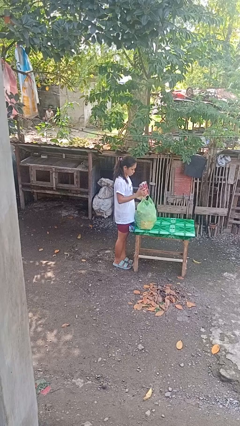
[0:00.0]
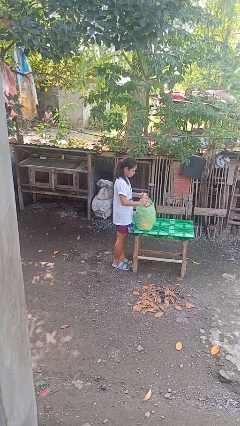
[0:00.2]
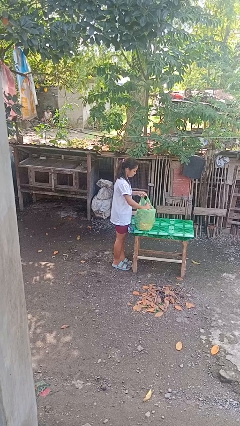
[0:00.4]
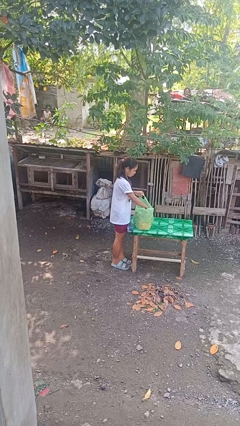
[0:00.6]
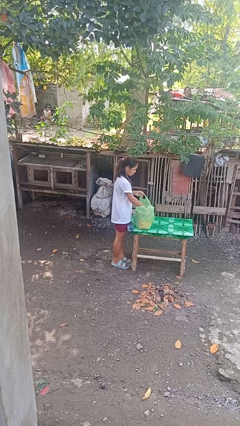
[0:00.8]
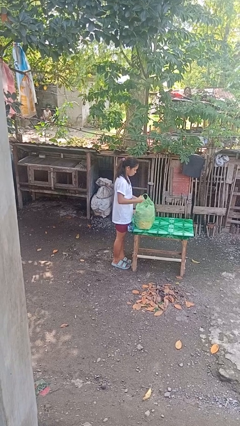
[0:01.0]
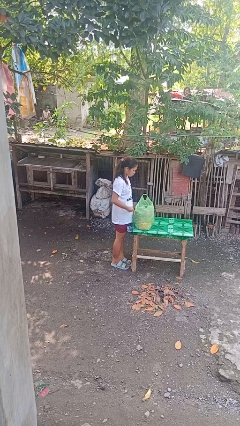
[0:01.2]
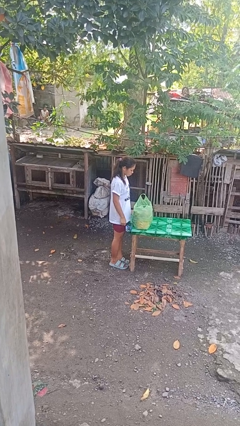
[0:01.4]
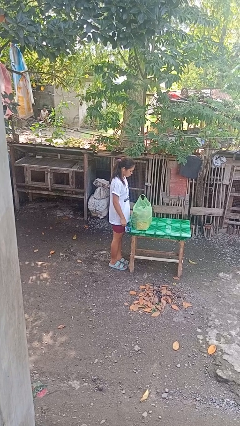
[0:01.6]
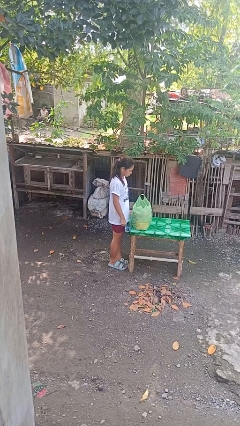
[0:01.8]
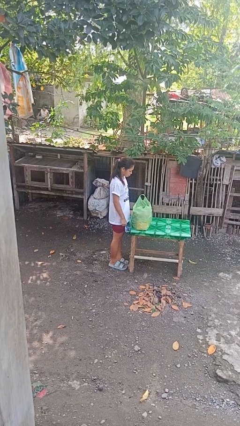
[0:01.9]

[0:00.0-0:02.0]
person puts object into bag

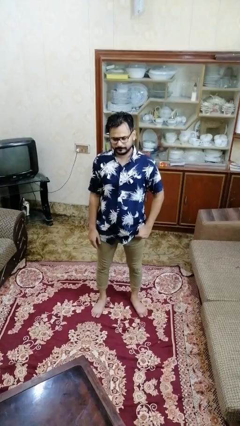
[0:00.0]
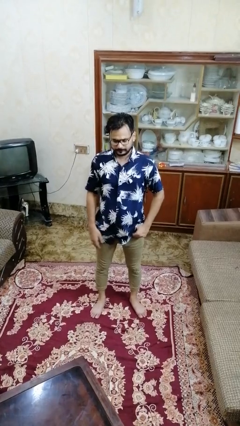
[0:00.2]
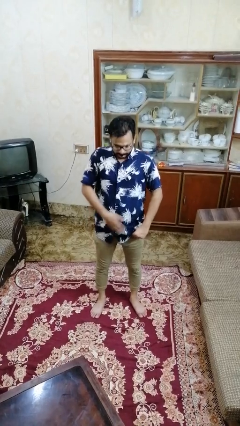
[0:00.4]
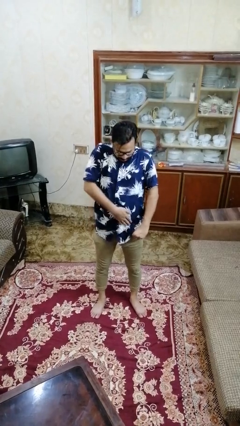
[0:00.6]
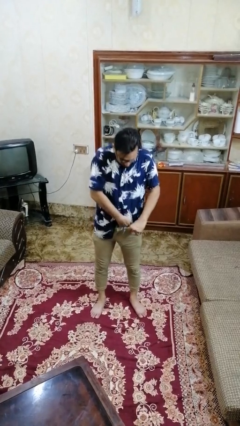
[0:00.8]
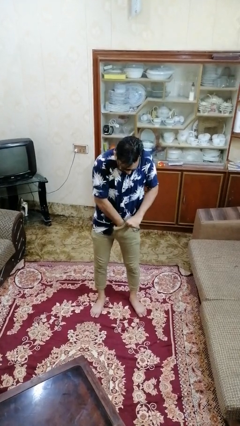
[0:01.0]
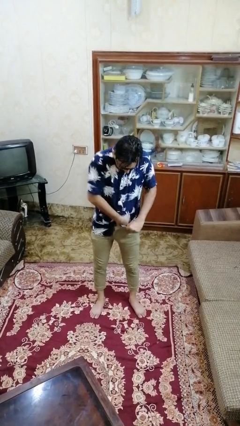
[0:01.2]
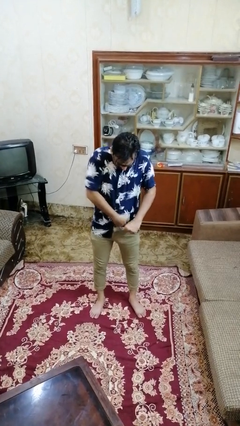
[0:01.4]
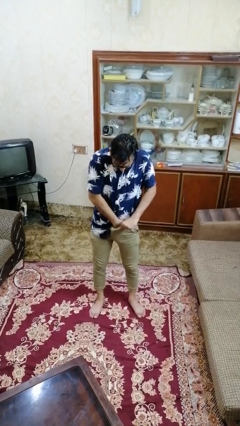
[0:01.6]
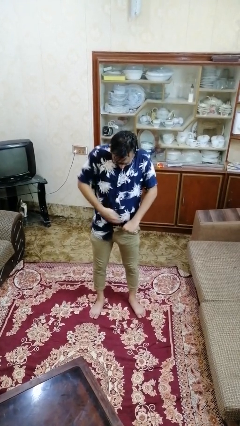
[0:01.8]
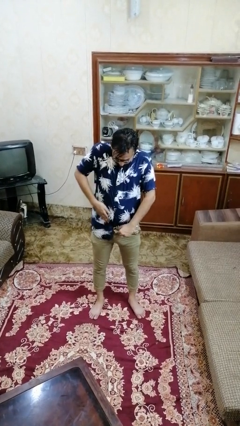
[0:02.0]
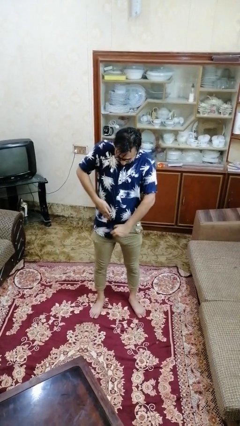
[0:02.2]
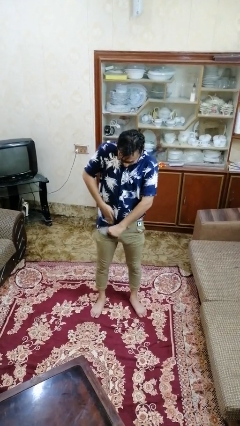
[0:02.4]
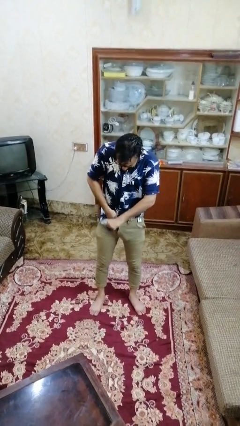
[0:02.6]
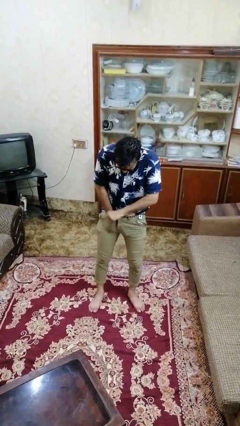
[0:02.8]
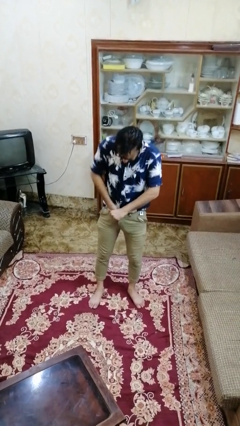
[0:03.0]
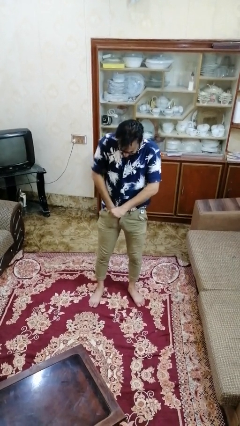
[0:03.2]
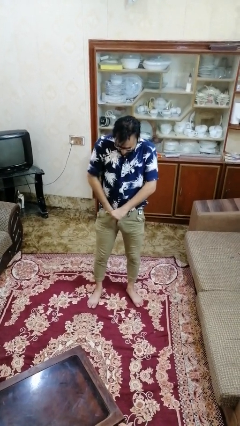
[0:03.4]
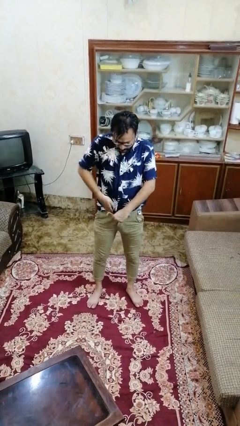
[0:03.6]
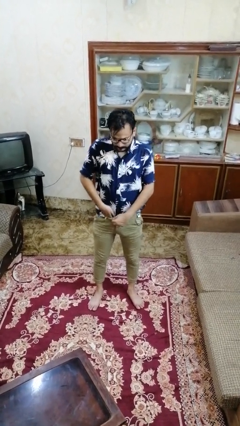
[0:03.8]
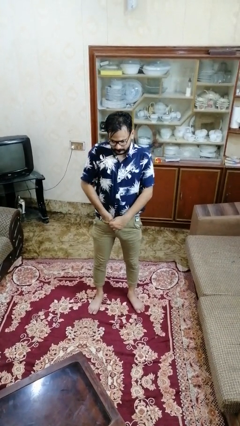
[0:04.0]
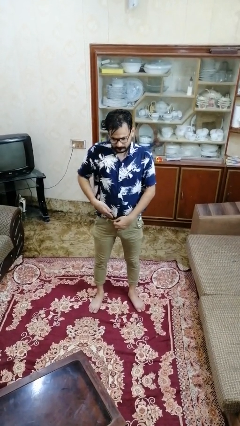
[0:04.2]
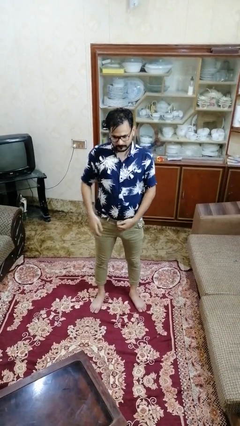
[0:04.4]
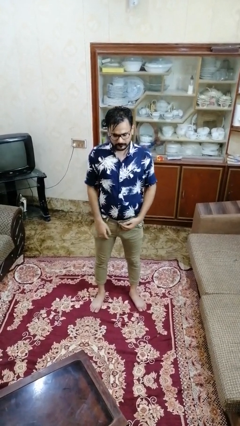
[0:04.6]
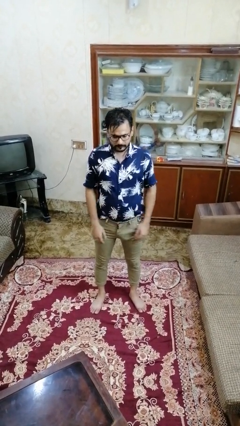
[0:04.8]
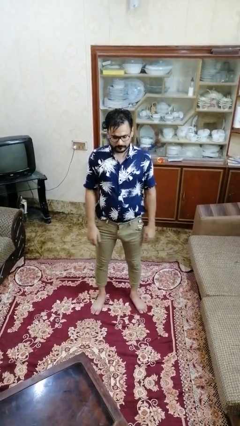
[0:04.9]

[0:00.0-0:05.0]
person tucks in shirt

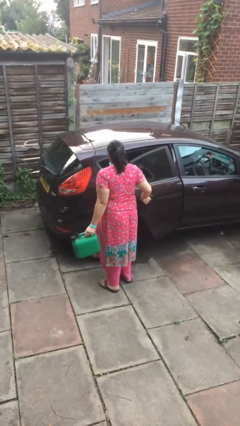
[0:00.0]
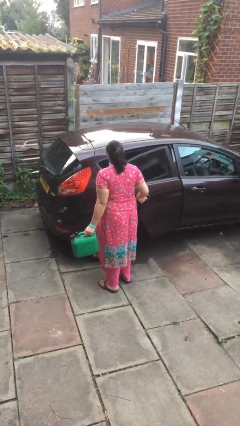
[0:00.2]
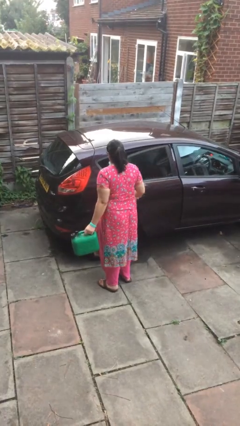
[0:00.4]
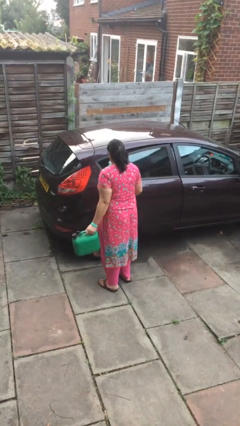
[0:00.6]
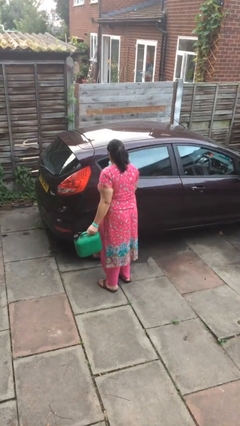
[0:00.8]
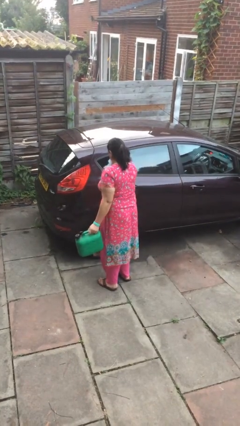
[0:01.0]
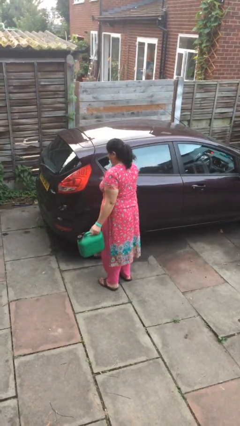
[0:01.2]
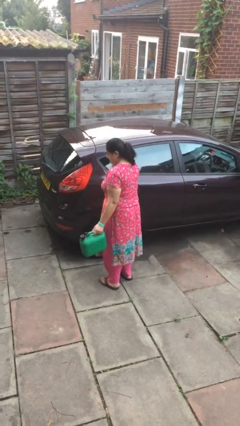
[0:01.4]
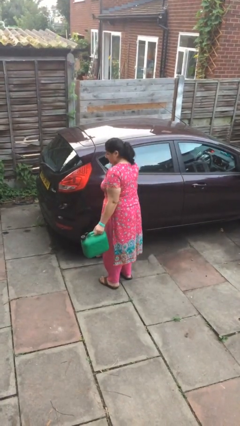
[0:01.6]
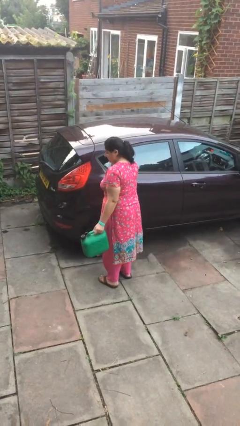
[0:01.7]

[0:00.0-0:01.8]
person closes car door

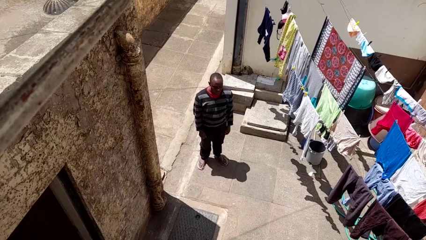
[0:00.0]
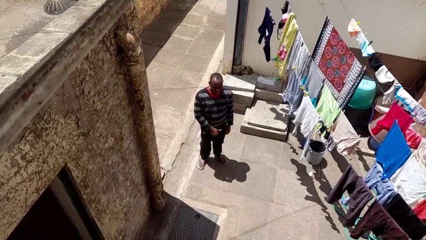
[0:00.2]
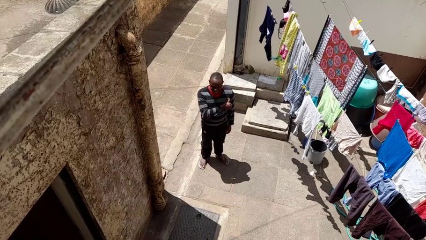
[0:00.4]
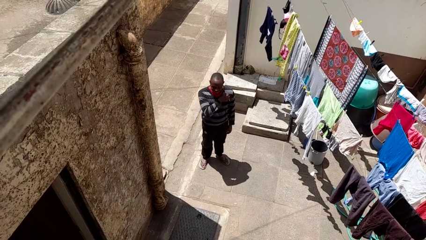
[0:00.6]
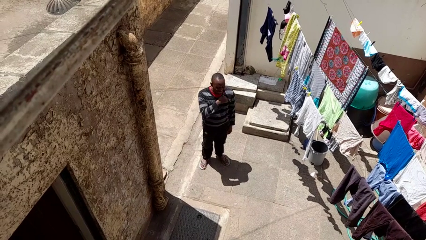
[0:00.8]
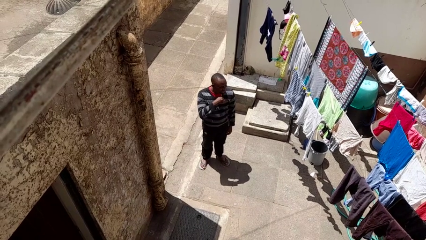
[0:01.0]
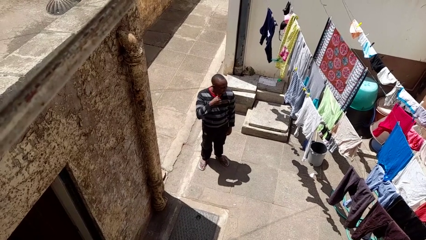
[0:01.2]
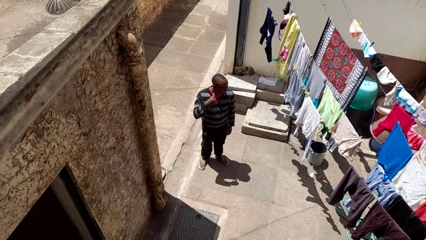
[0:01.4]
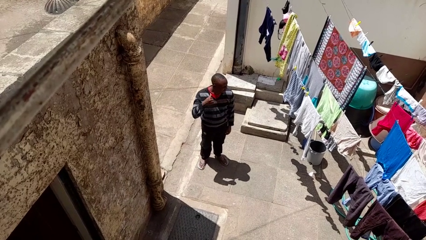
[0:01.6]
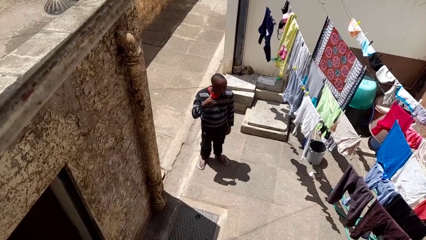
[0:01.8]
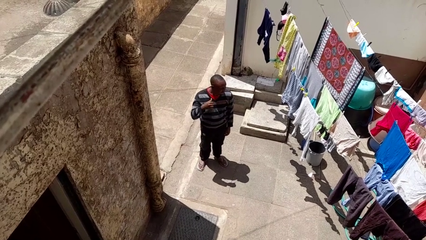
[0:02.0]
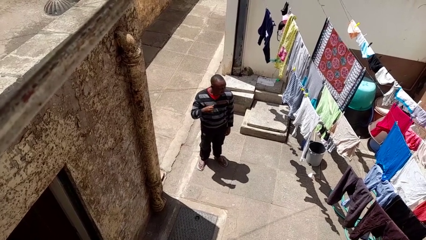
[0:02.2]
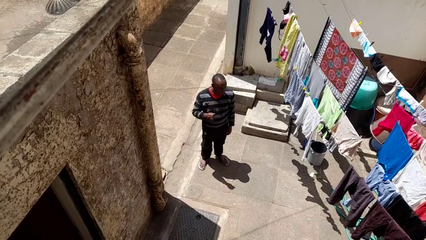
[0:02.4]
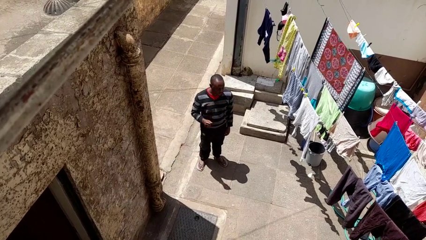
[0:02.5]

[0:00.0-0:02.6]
person gestures cut

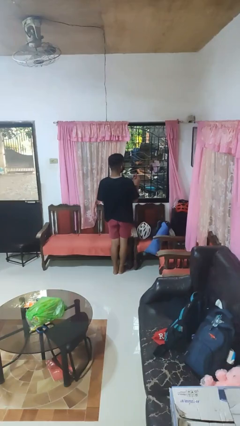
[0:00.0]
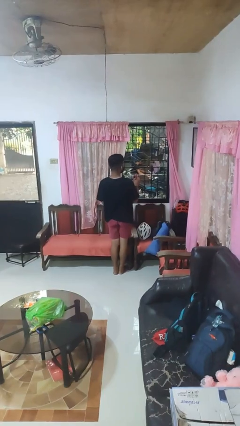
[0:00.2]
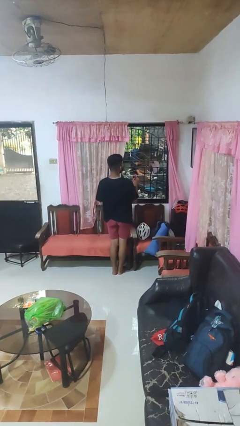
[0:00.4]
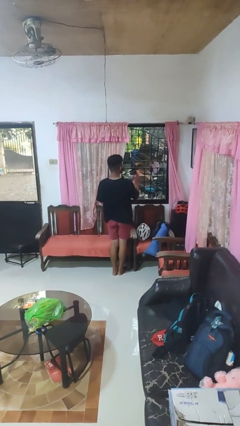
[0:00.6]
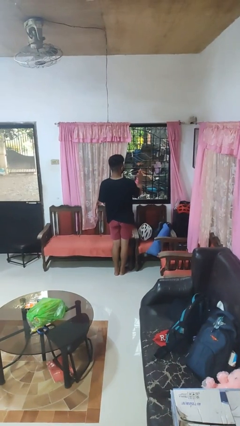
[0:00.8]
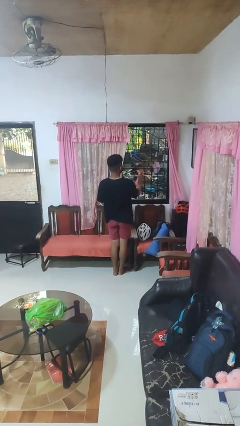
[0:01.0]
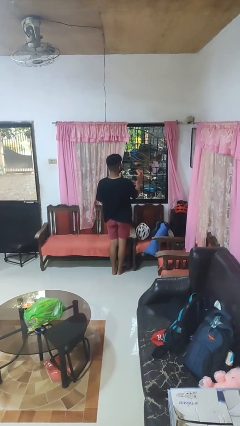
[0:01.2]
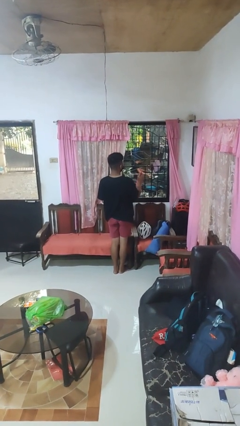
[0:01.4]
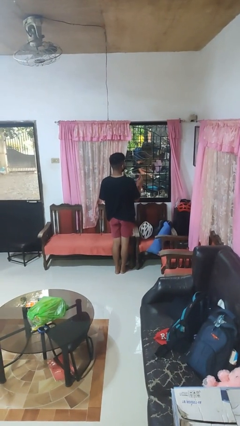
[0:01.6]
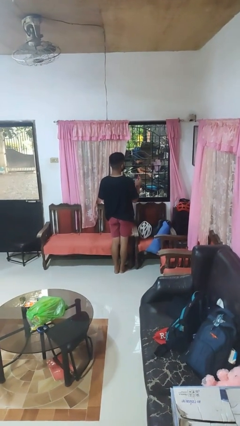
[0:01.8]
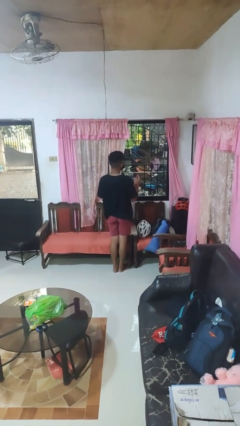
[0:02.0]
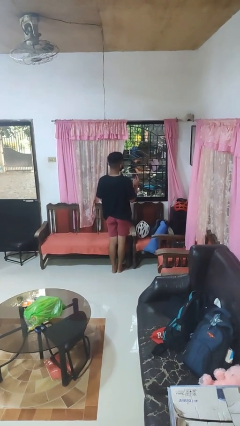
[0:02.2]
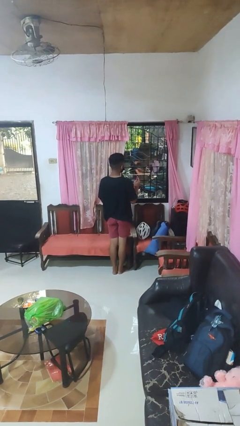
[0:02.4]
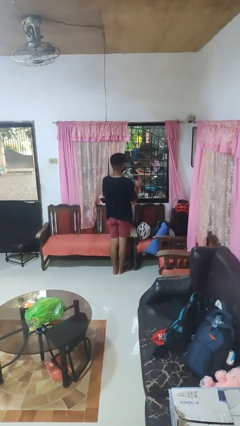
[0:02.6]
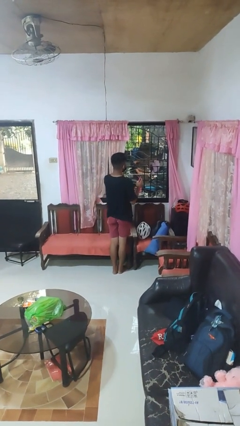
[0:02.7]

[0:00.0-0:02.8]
person sprays from bottle

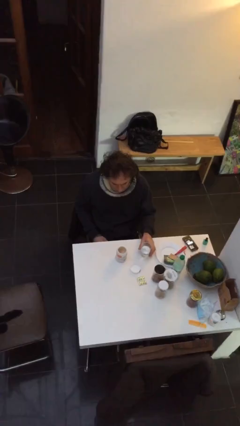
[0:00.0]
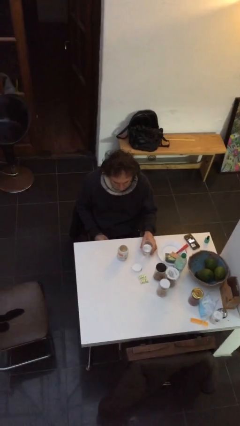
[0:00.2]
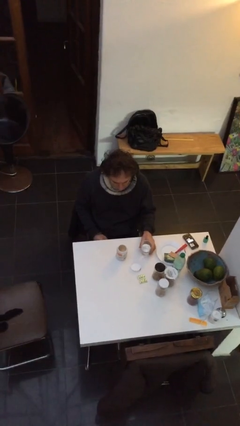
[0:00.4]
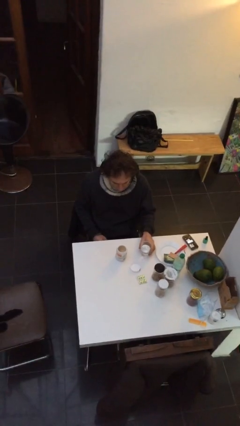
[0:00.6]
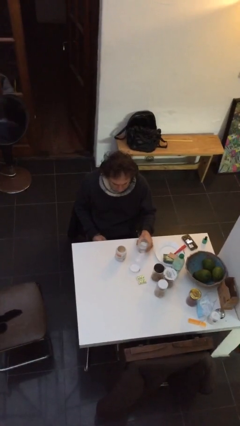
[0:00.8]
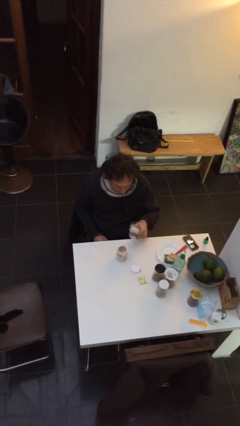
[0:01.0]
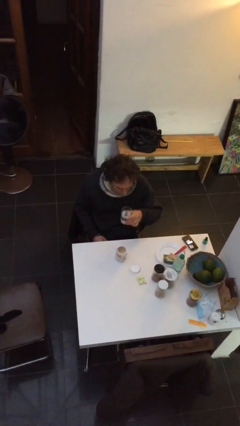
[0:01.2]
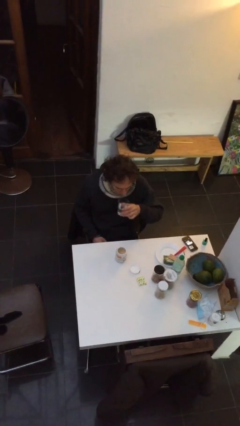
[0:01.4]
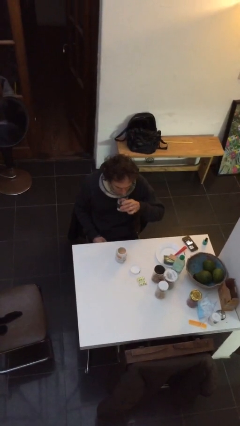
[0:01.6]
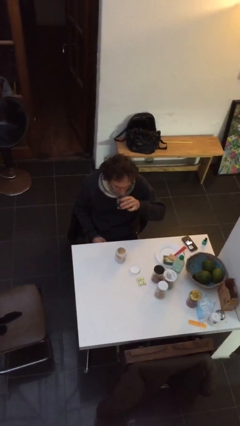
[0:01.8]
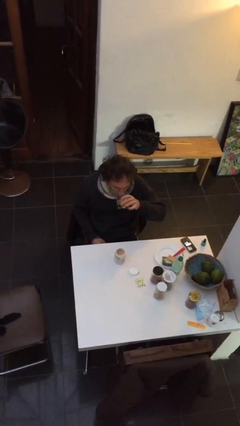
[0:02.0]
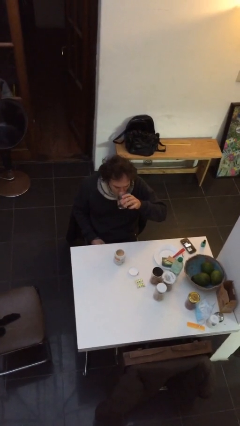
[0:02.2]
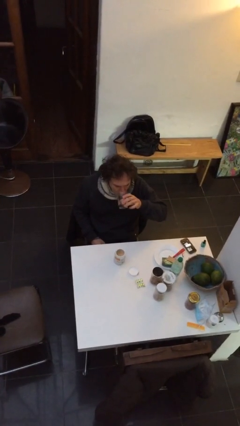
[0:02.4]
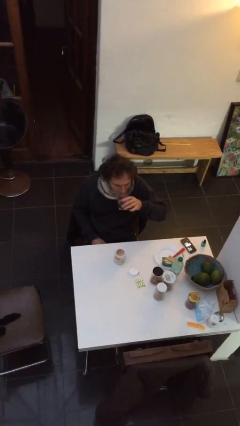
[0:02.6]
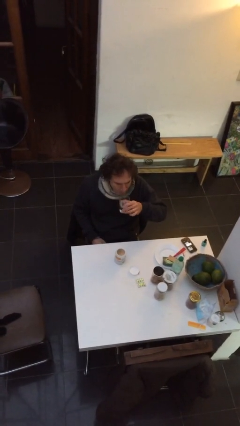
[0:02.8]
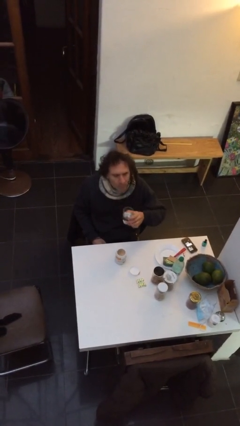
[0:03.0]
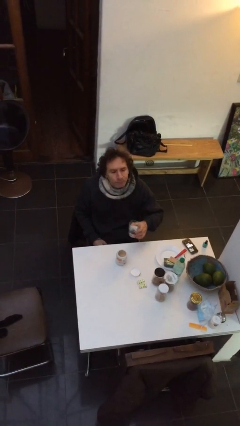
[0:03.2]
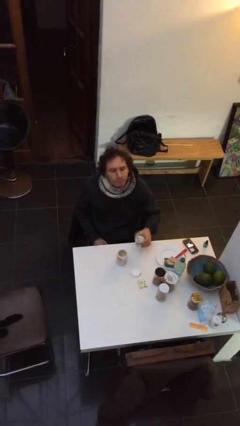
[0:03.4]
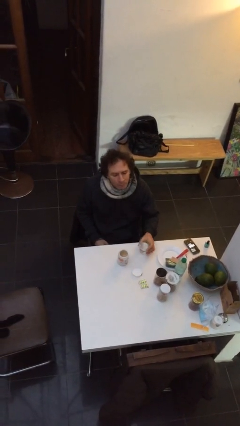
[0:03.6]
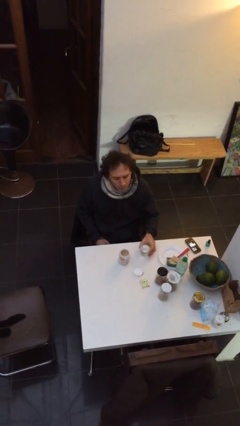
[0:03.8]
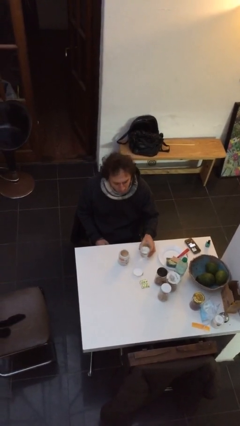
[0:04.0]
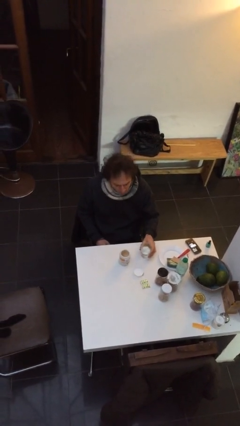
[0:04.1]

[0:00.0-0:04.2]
person drinks from cup
